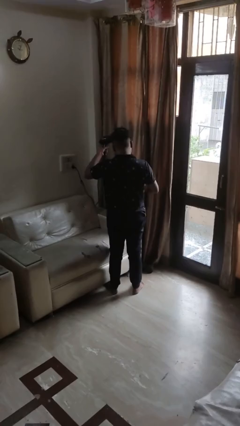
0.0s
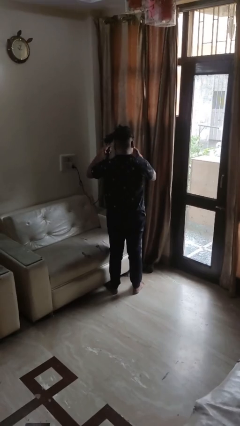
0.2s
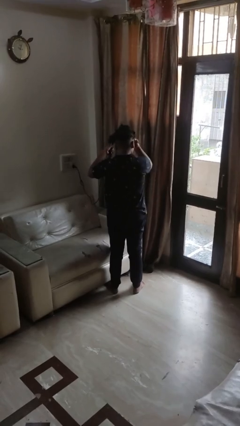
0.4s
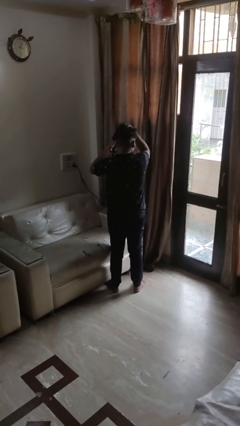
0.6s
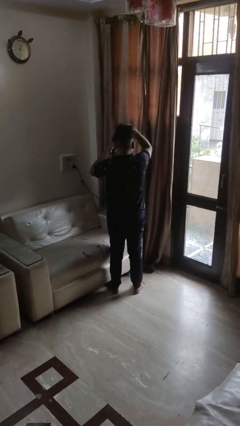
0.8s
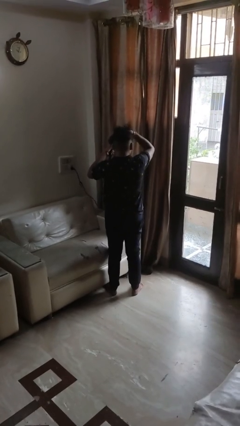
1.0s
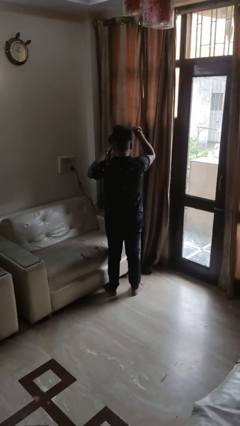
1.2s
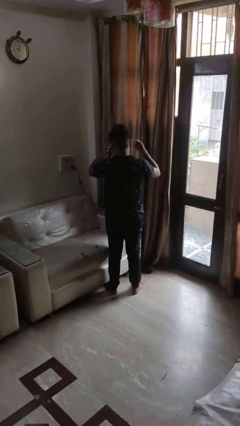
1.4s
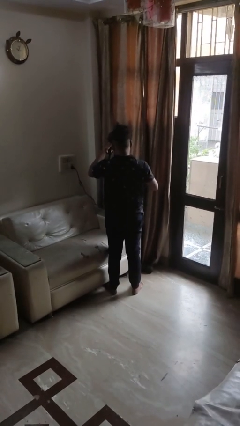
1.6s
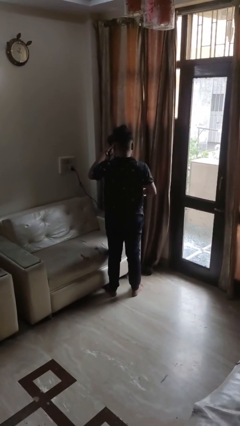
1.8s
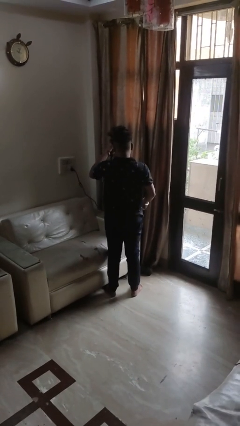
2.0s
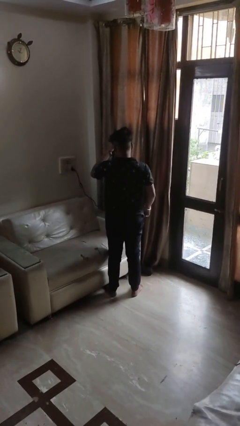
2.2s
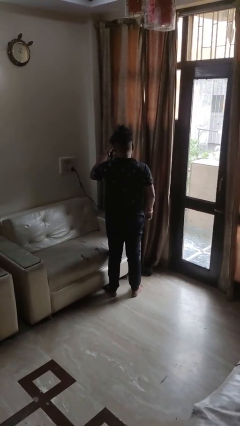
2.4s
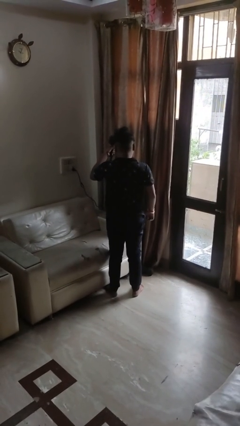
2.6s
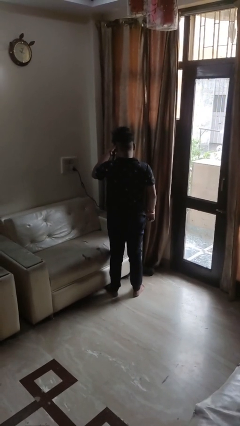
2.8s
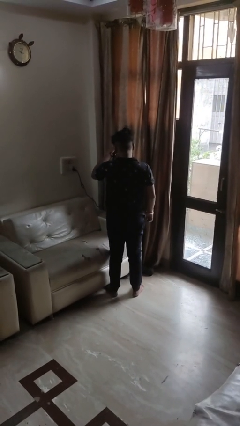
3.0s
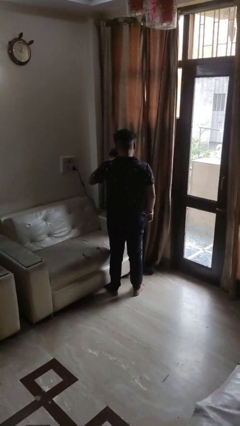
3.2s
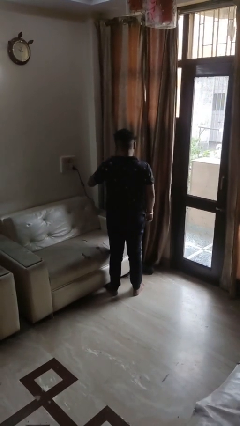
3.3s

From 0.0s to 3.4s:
person dries hair with hairdryer

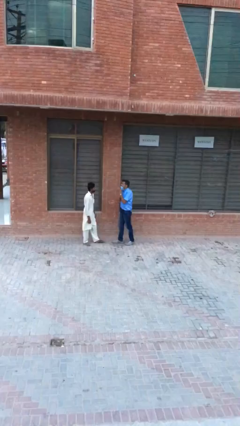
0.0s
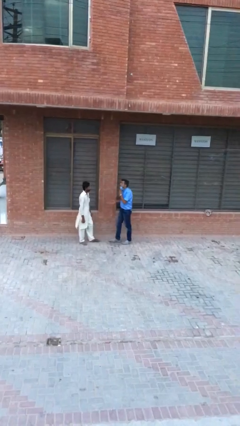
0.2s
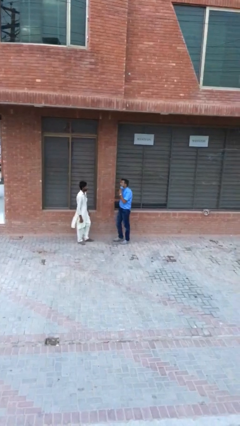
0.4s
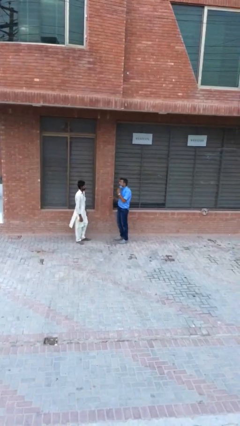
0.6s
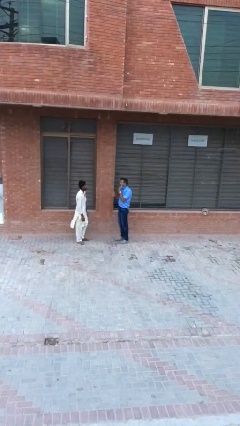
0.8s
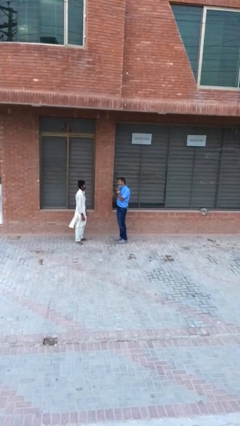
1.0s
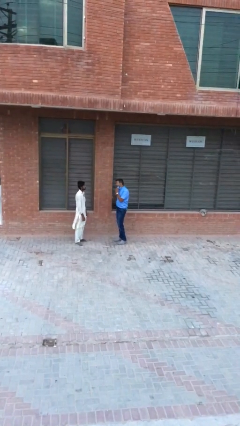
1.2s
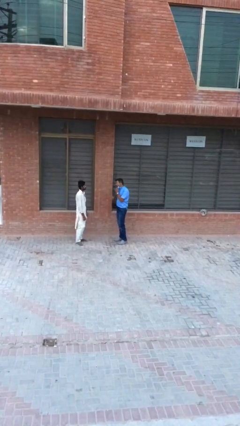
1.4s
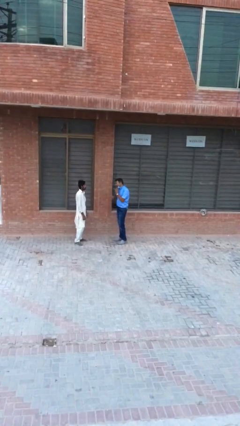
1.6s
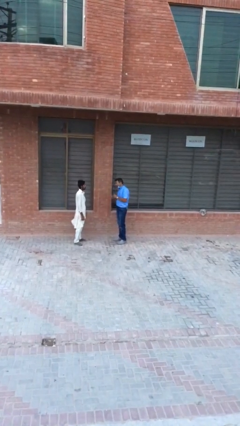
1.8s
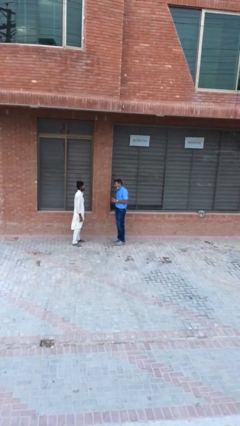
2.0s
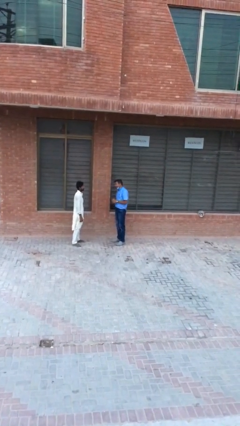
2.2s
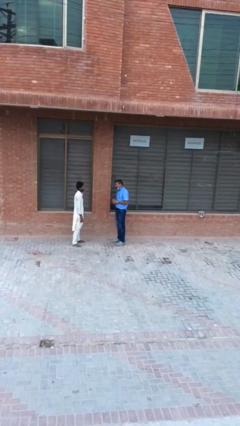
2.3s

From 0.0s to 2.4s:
person talks to person

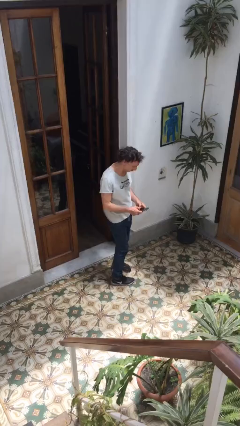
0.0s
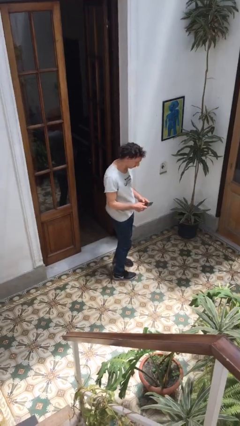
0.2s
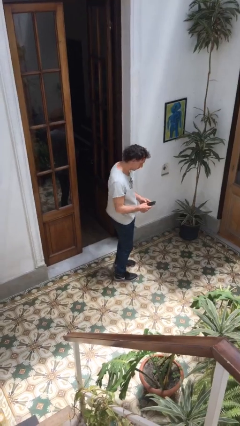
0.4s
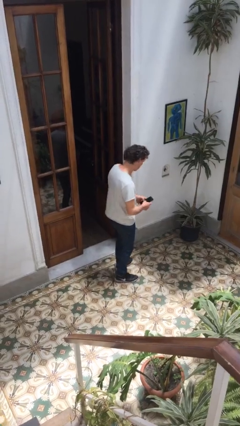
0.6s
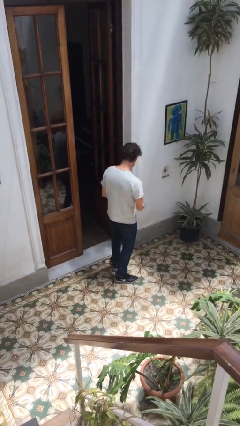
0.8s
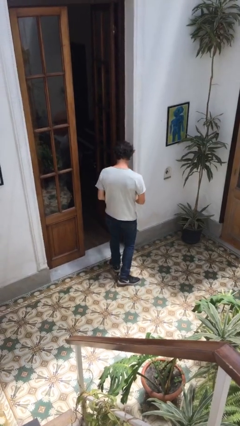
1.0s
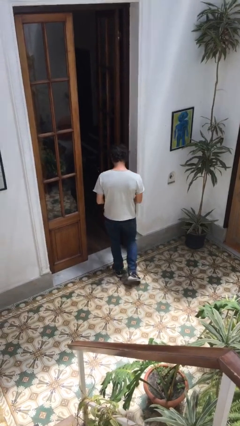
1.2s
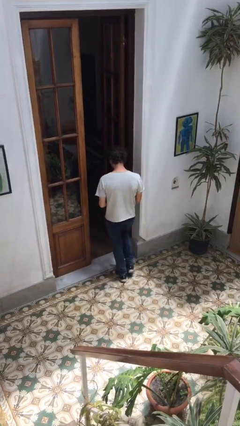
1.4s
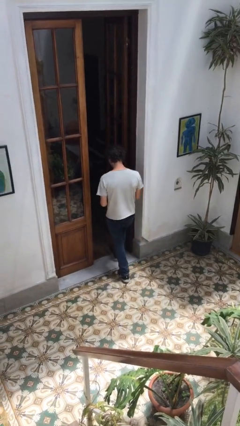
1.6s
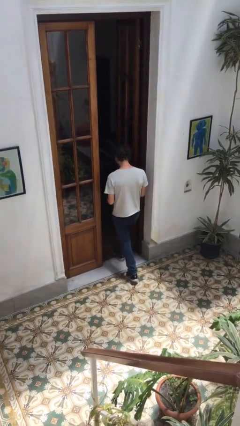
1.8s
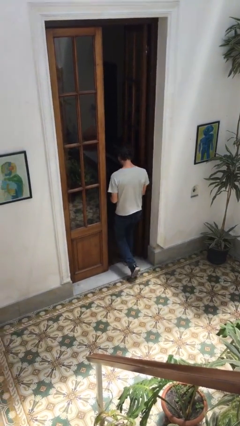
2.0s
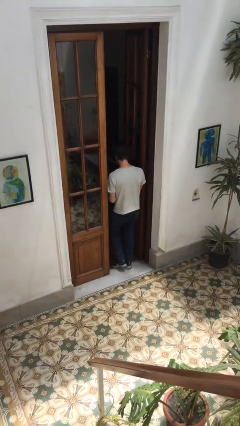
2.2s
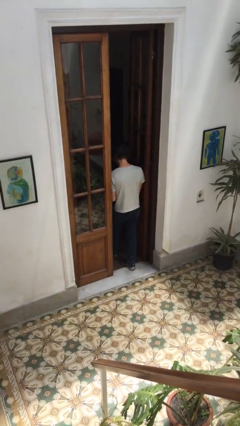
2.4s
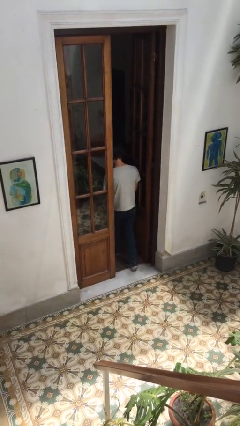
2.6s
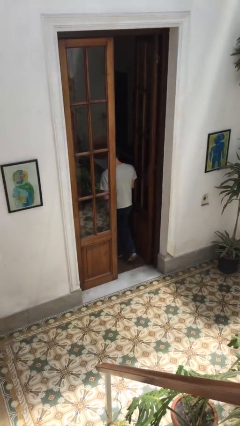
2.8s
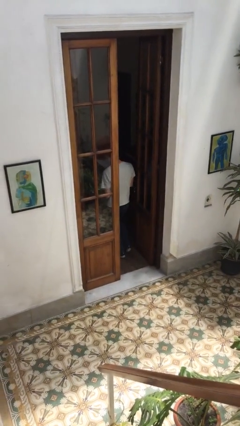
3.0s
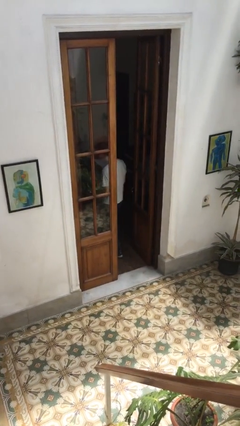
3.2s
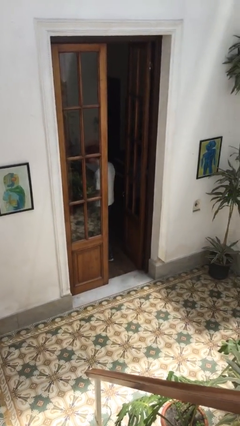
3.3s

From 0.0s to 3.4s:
person exits scene through structure

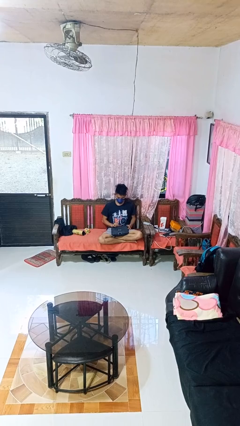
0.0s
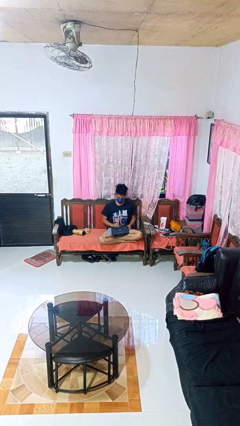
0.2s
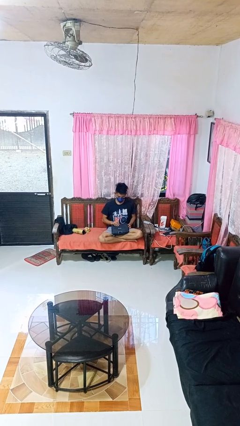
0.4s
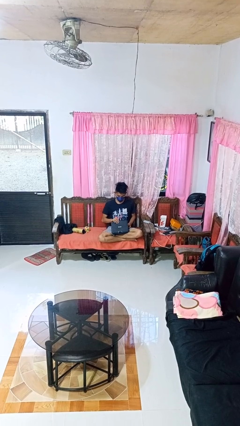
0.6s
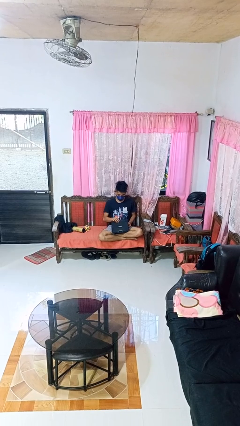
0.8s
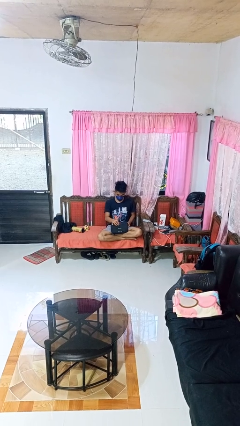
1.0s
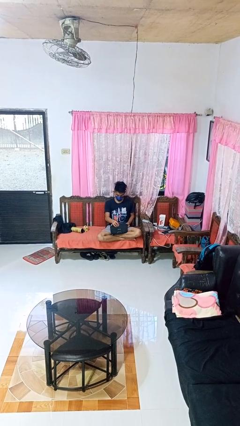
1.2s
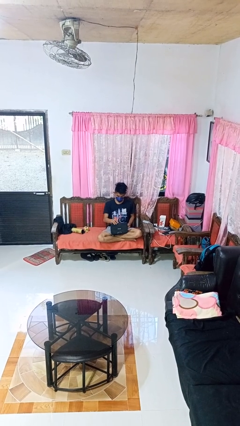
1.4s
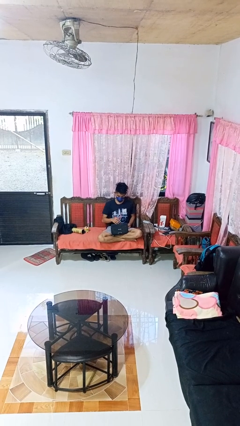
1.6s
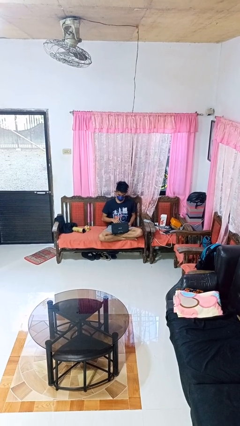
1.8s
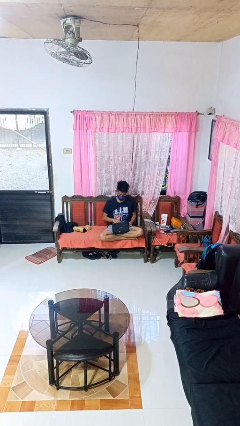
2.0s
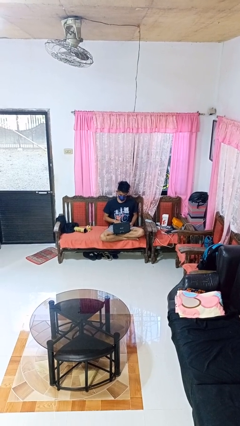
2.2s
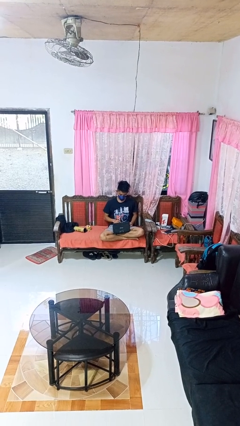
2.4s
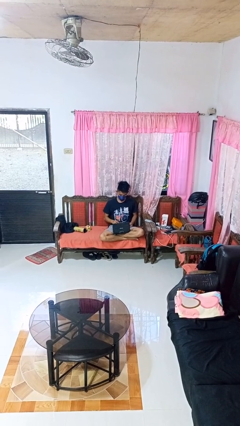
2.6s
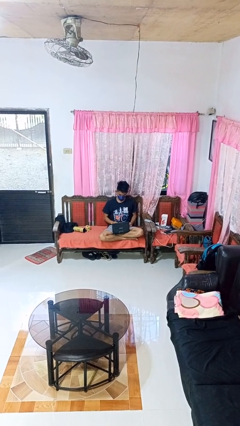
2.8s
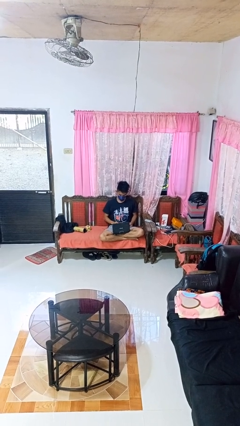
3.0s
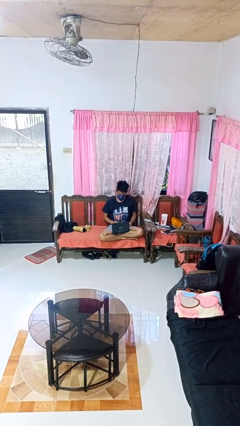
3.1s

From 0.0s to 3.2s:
person opens laptop

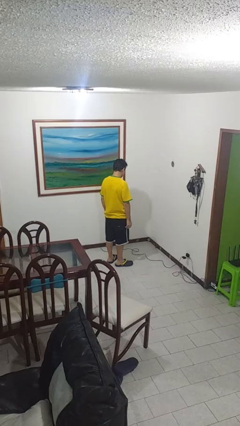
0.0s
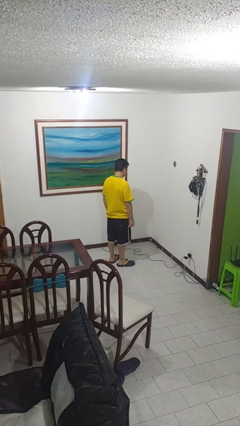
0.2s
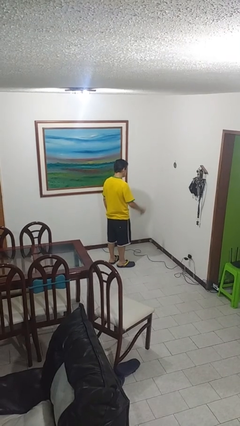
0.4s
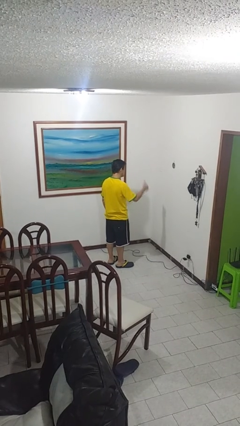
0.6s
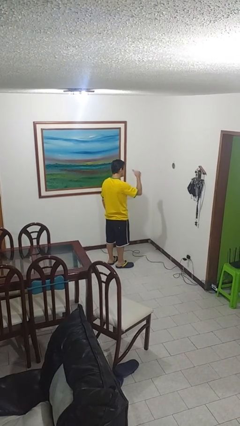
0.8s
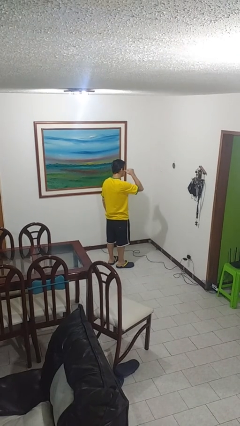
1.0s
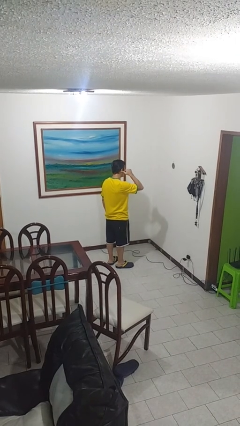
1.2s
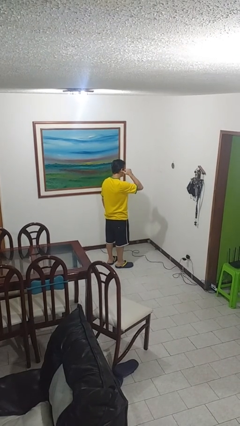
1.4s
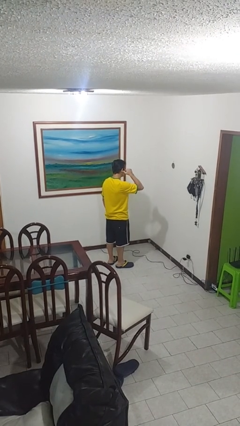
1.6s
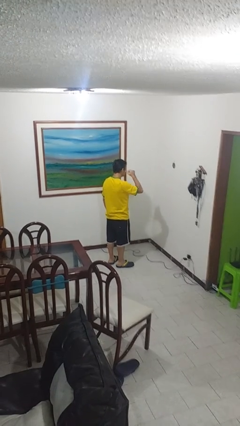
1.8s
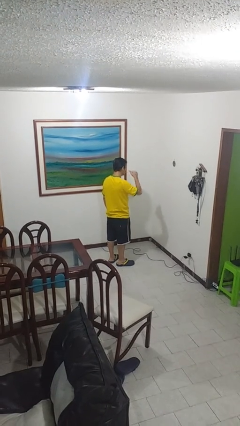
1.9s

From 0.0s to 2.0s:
person gestures call me

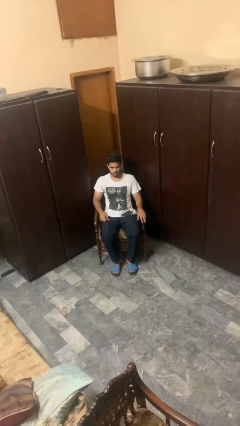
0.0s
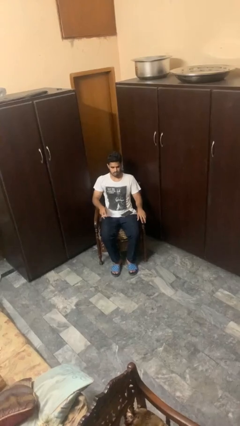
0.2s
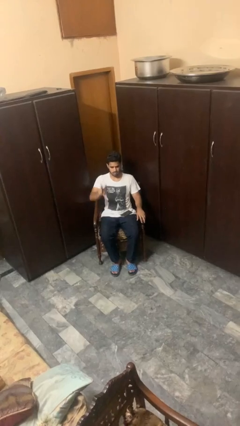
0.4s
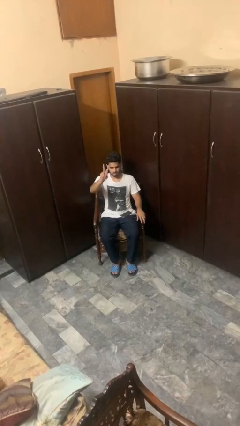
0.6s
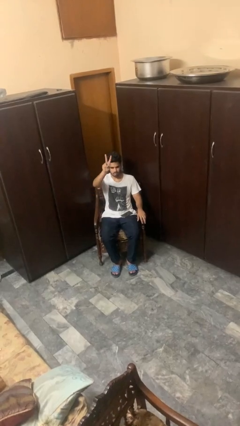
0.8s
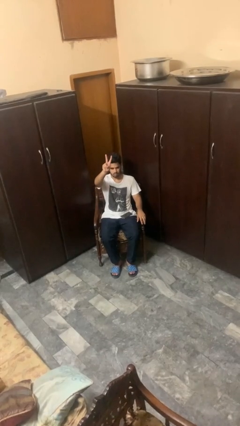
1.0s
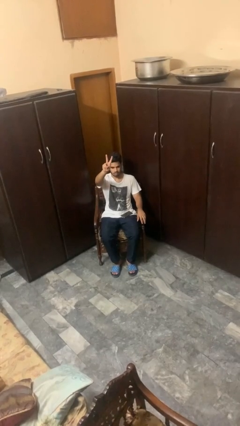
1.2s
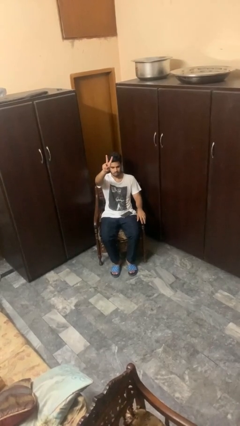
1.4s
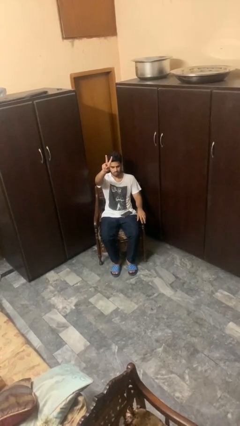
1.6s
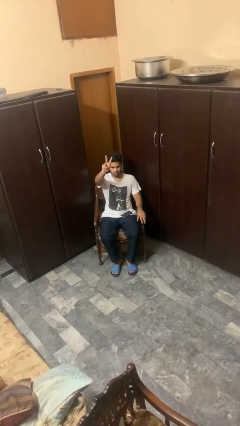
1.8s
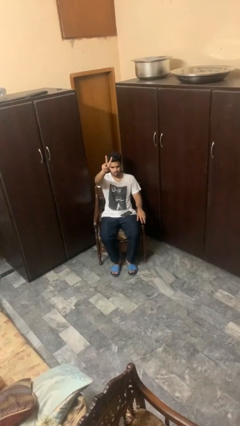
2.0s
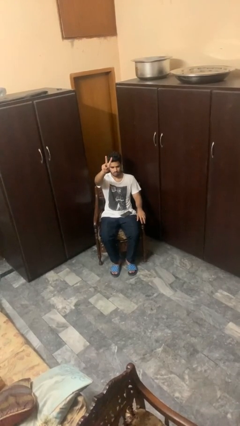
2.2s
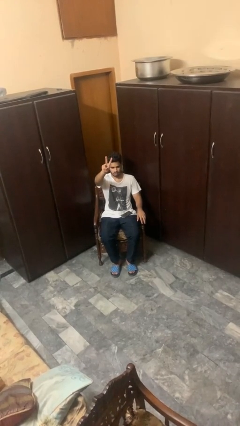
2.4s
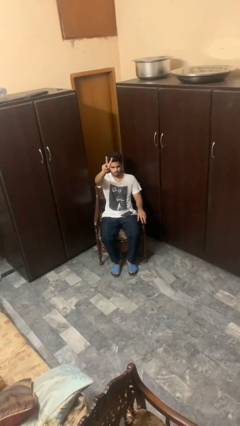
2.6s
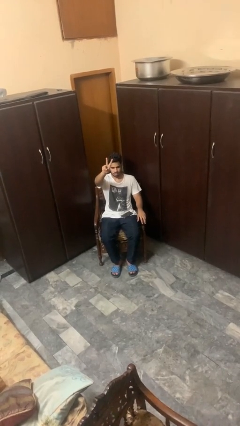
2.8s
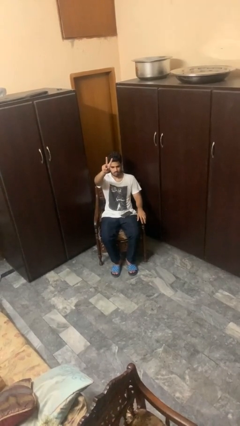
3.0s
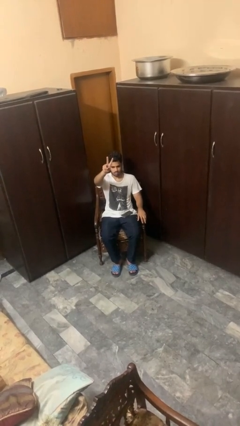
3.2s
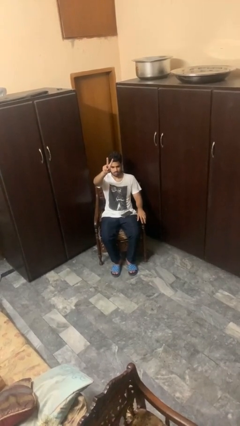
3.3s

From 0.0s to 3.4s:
person gestures peace
